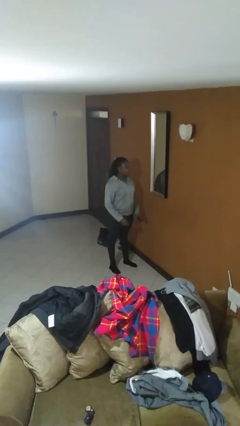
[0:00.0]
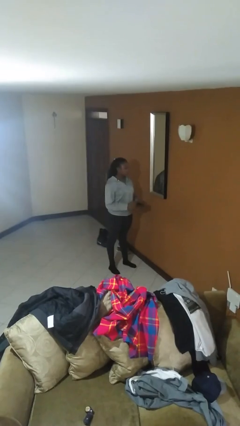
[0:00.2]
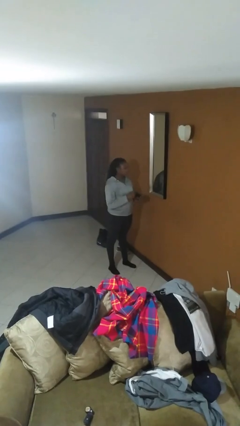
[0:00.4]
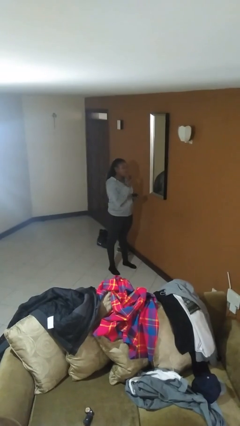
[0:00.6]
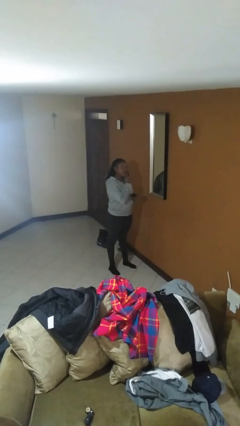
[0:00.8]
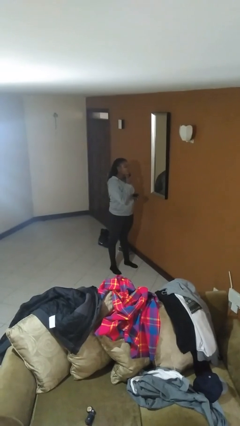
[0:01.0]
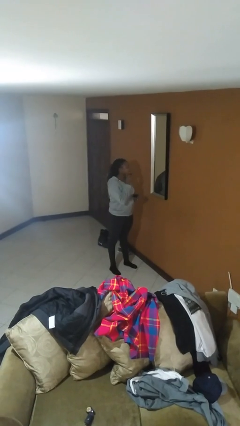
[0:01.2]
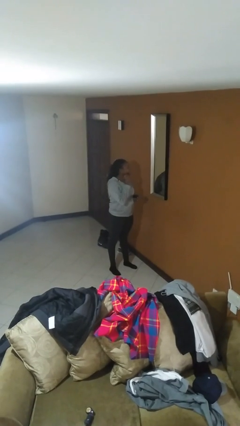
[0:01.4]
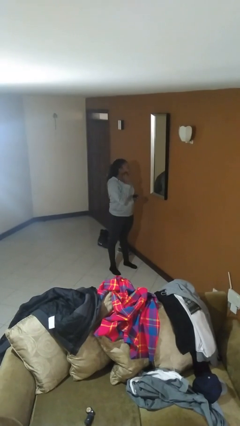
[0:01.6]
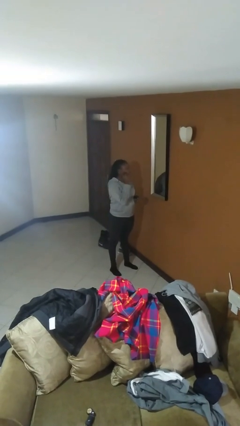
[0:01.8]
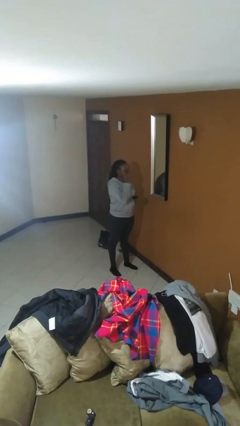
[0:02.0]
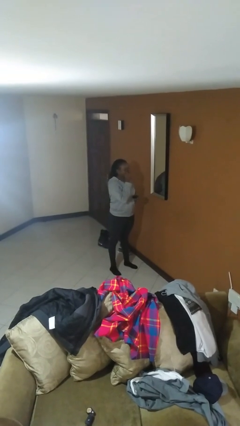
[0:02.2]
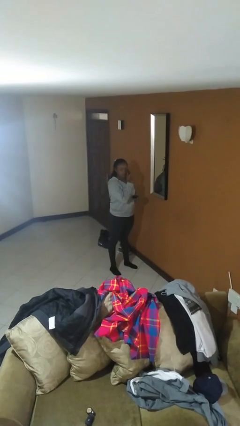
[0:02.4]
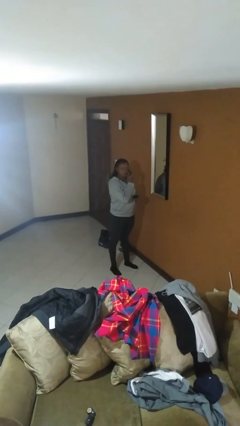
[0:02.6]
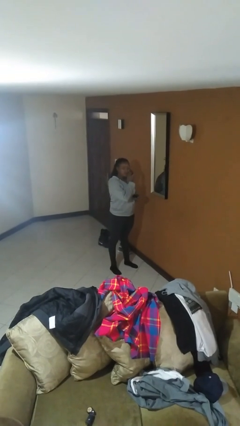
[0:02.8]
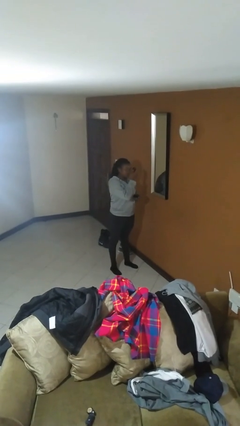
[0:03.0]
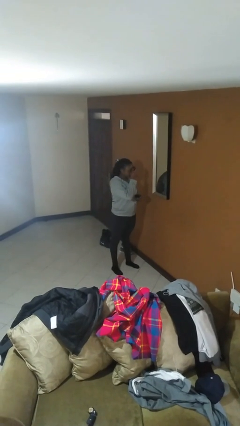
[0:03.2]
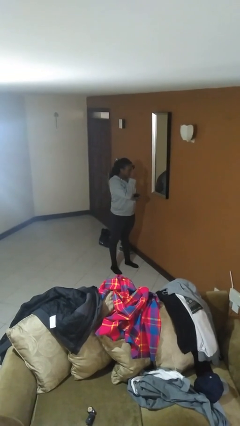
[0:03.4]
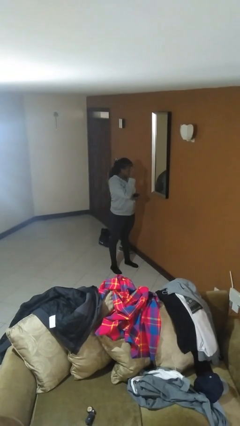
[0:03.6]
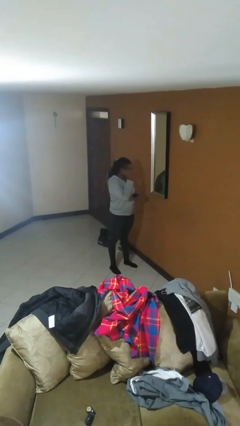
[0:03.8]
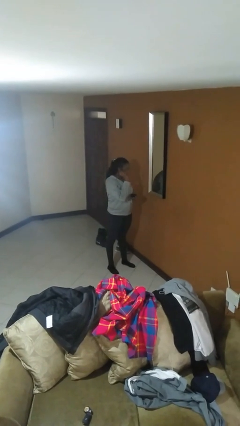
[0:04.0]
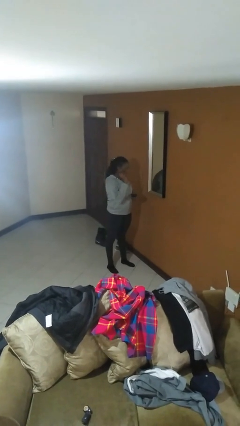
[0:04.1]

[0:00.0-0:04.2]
person applies foundation makeup

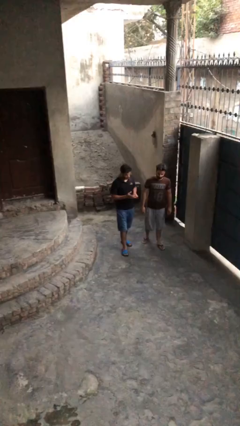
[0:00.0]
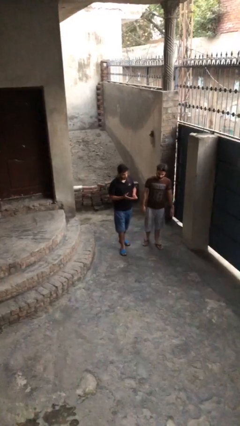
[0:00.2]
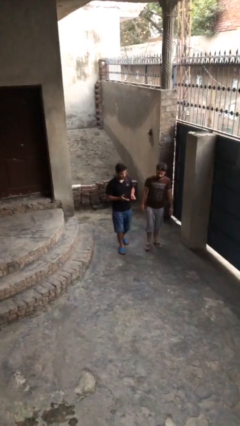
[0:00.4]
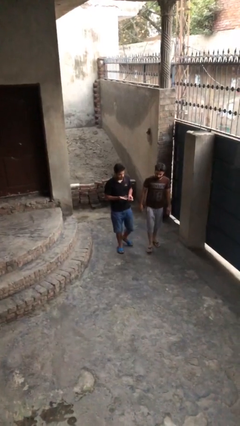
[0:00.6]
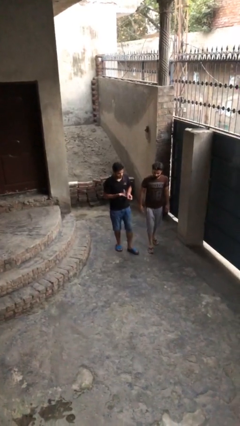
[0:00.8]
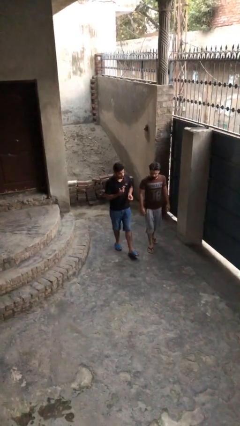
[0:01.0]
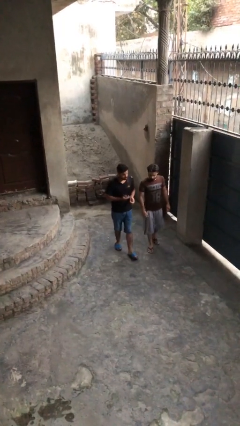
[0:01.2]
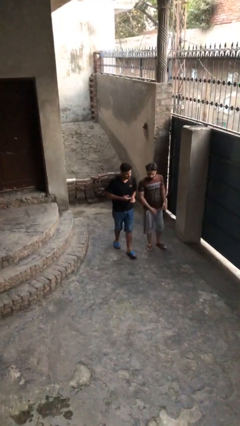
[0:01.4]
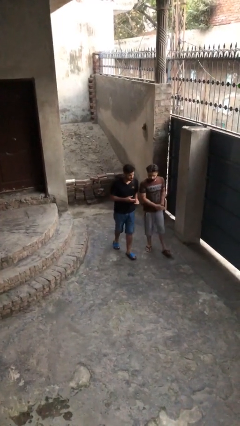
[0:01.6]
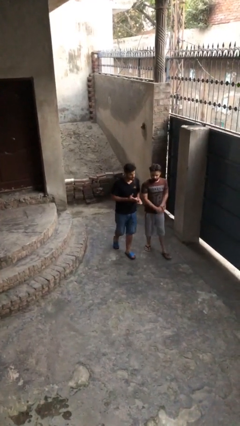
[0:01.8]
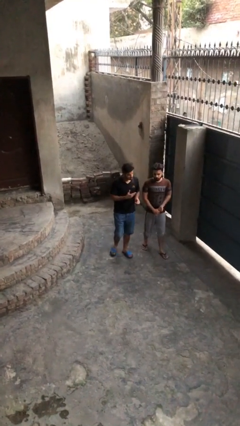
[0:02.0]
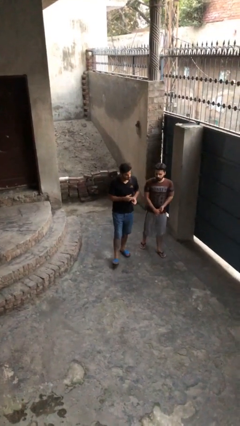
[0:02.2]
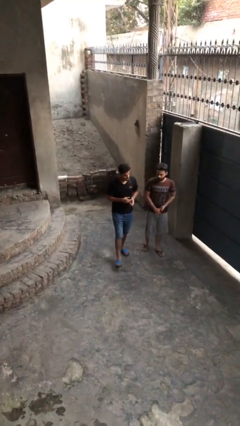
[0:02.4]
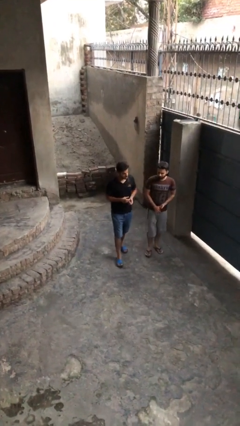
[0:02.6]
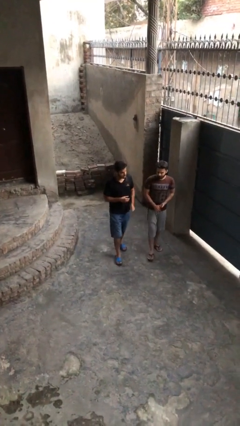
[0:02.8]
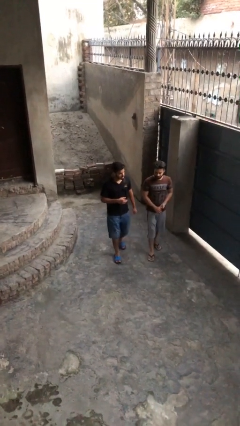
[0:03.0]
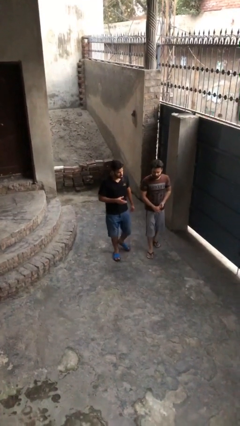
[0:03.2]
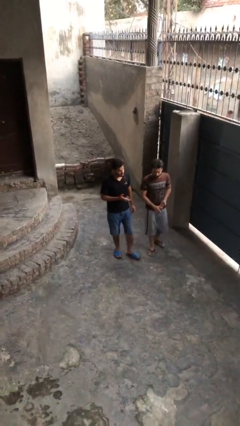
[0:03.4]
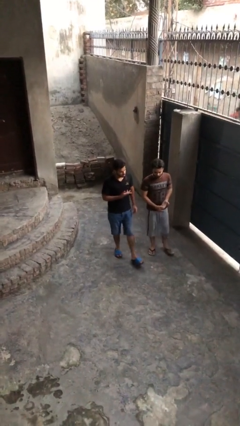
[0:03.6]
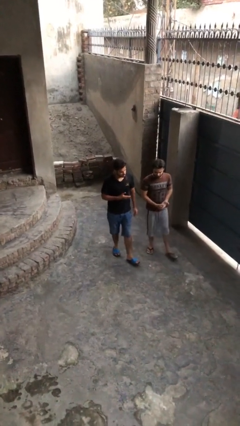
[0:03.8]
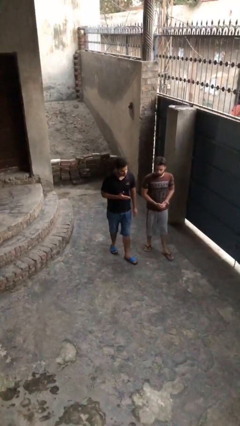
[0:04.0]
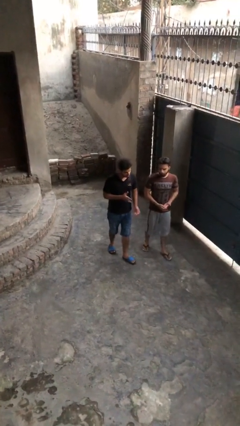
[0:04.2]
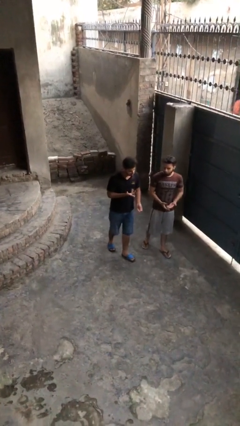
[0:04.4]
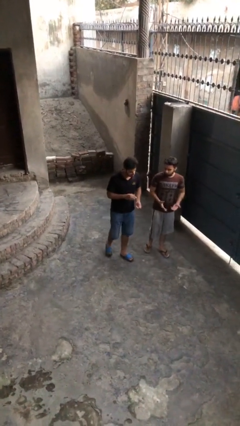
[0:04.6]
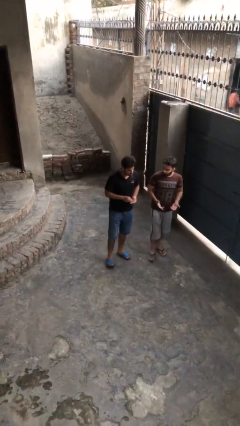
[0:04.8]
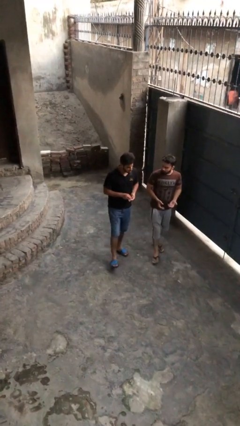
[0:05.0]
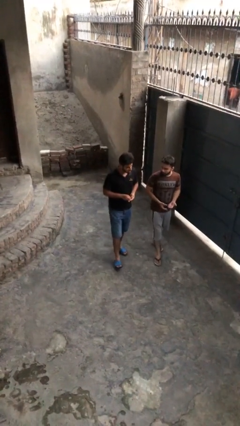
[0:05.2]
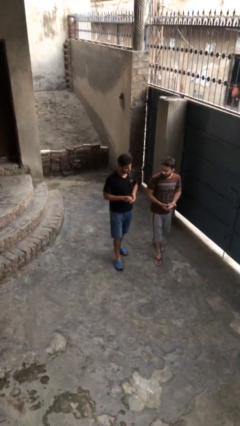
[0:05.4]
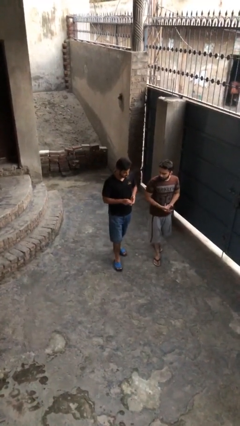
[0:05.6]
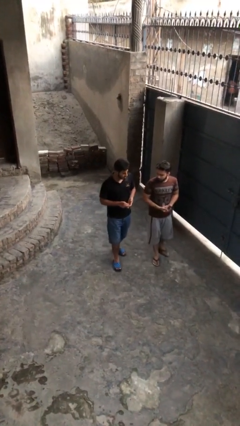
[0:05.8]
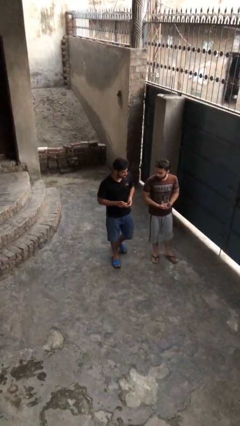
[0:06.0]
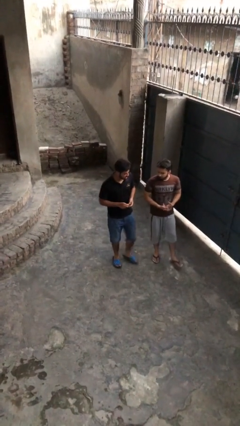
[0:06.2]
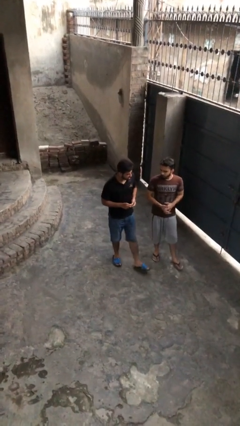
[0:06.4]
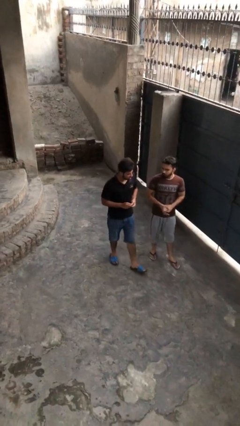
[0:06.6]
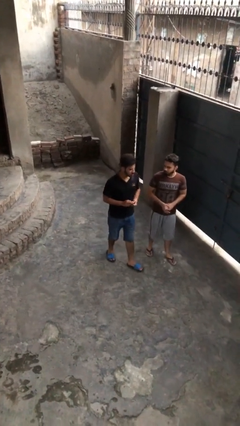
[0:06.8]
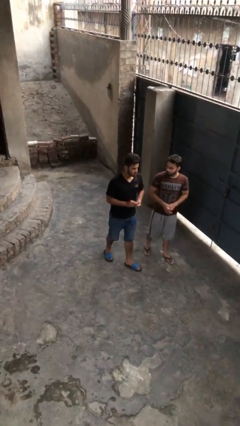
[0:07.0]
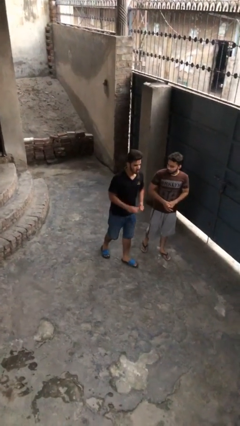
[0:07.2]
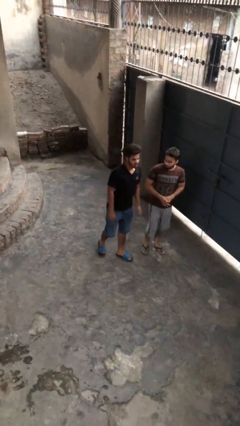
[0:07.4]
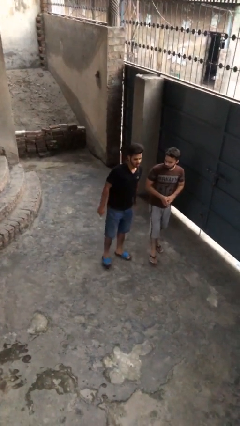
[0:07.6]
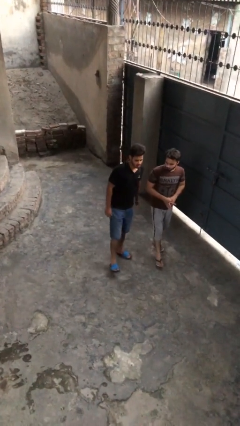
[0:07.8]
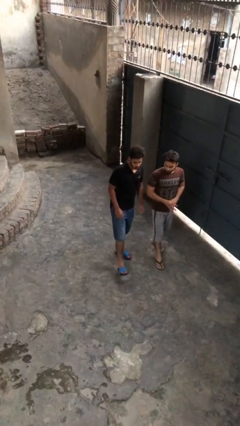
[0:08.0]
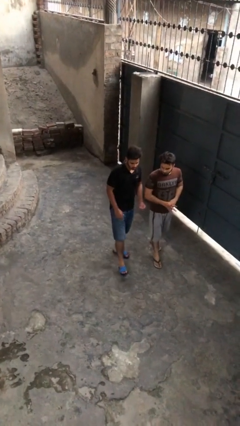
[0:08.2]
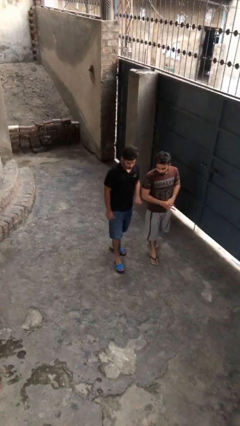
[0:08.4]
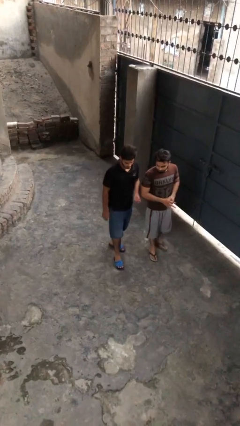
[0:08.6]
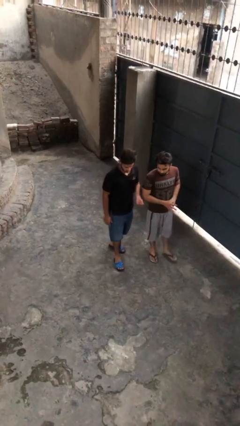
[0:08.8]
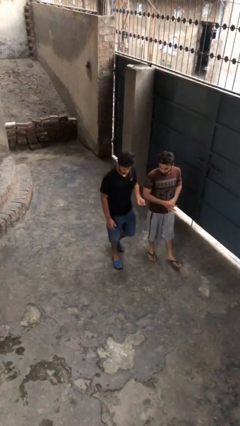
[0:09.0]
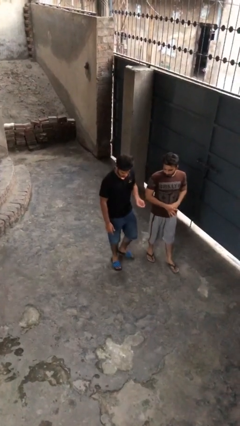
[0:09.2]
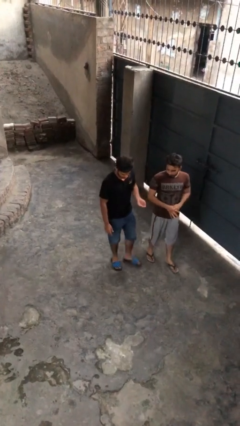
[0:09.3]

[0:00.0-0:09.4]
person talks to person

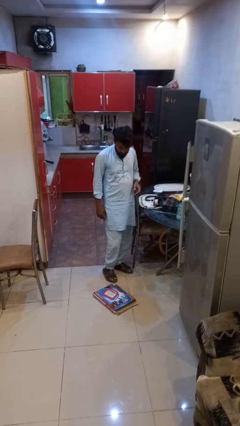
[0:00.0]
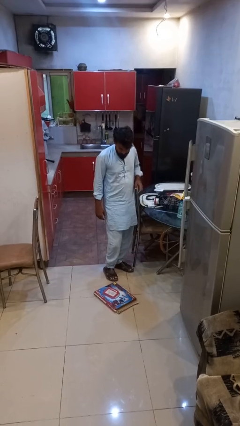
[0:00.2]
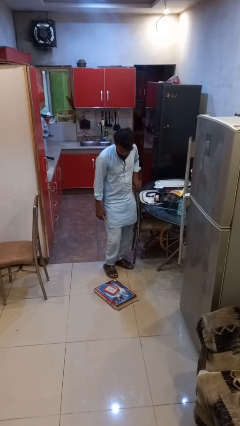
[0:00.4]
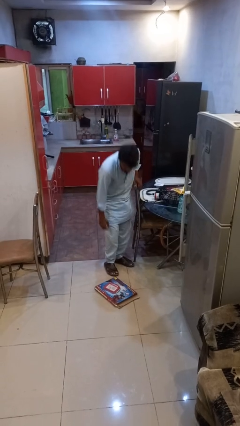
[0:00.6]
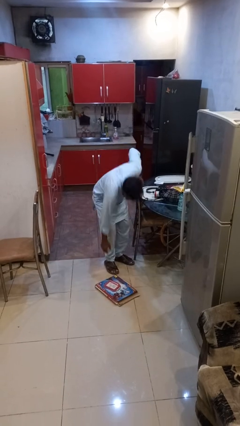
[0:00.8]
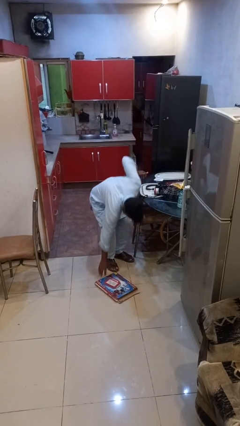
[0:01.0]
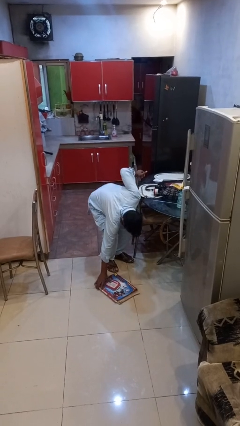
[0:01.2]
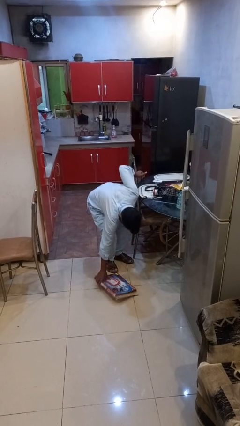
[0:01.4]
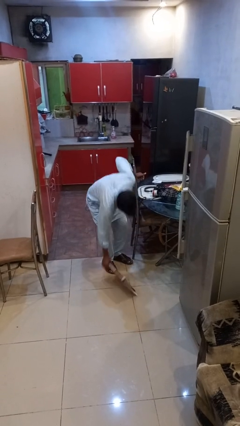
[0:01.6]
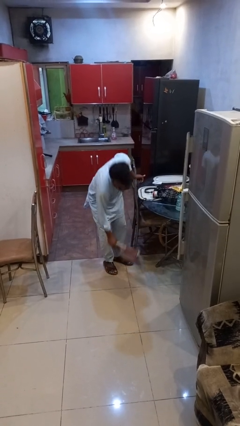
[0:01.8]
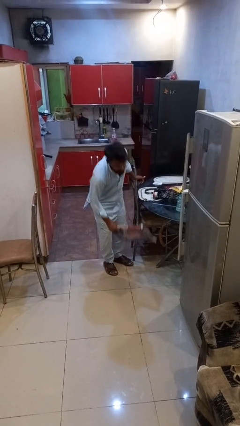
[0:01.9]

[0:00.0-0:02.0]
person picks up object from floor

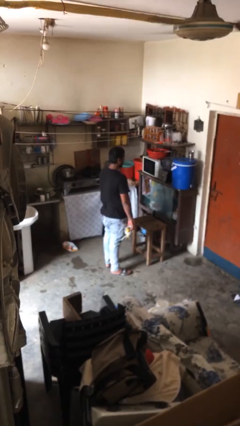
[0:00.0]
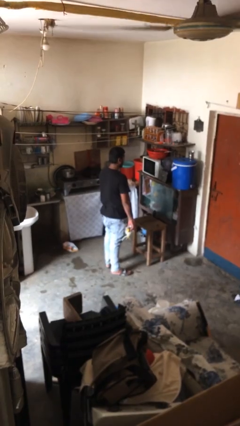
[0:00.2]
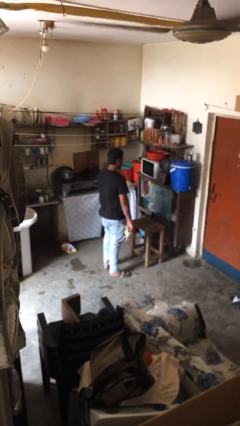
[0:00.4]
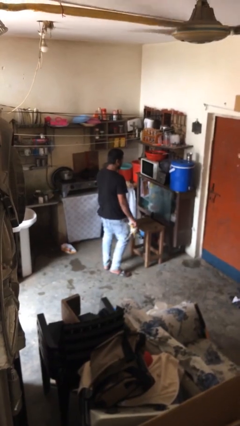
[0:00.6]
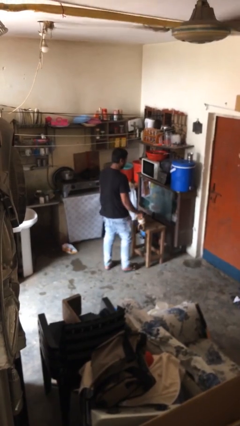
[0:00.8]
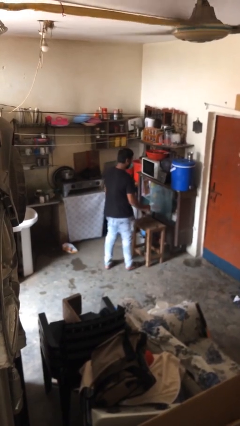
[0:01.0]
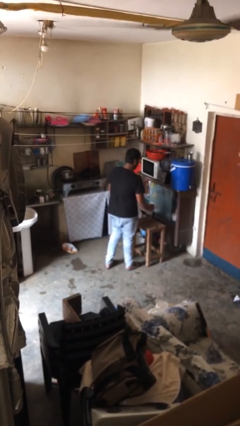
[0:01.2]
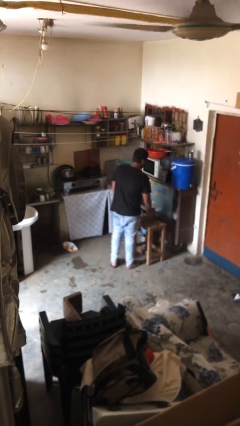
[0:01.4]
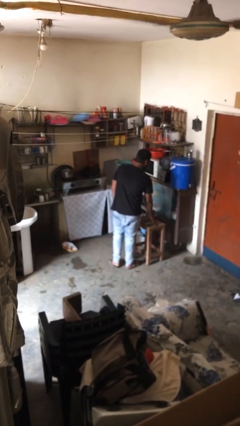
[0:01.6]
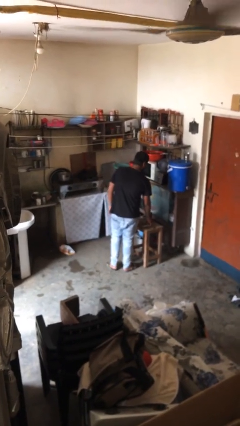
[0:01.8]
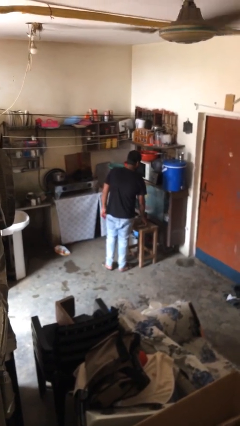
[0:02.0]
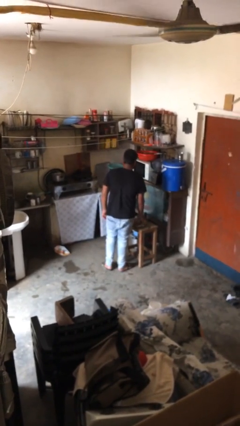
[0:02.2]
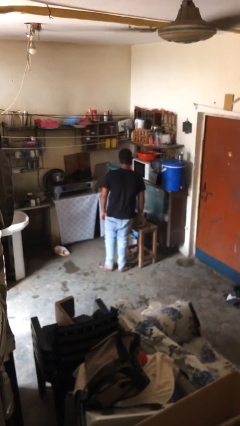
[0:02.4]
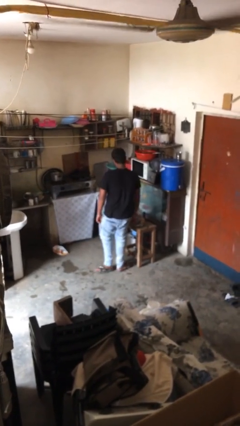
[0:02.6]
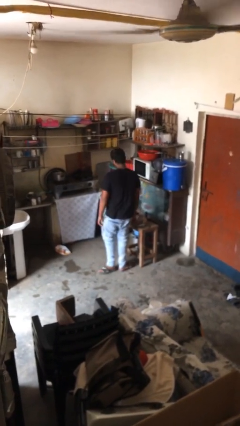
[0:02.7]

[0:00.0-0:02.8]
person puts down object on table
